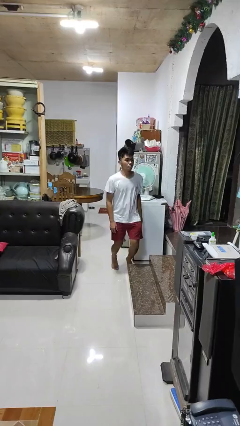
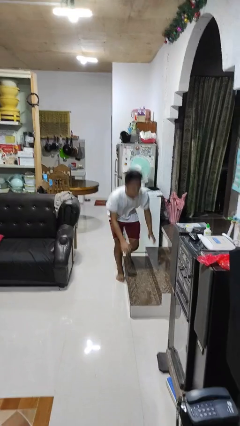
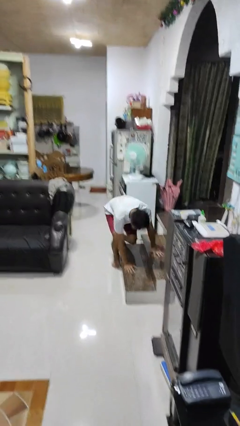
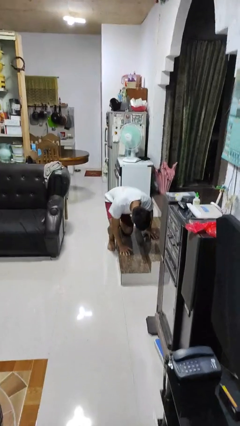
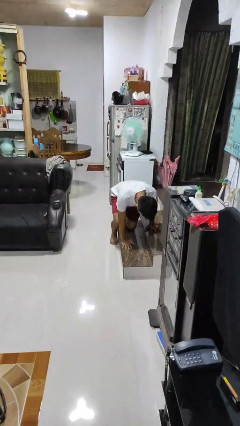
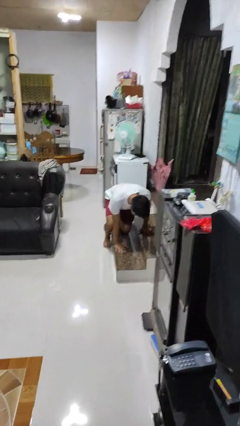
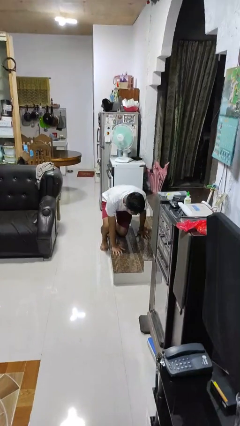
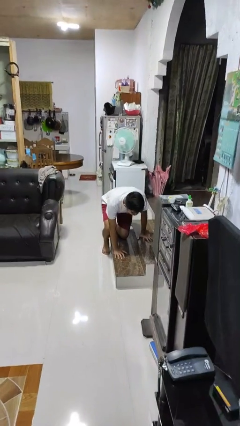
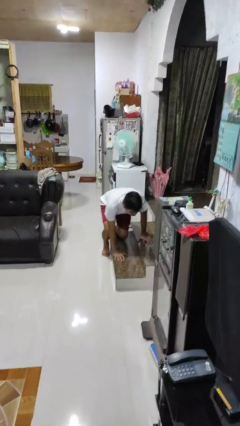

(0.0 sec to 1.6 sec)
person trips on object on floor

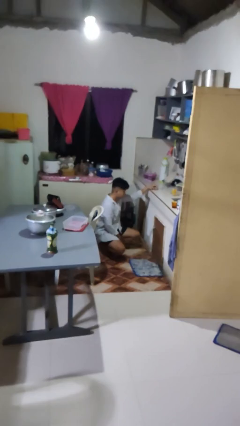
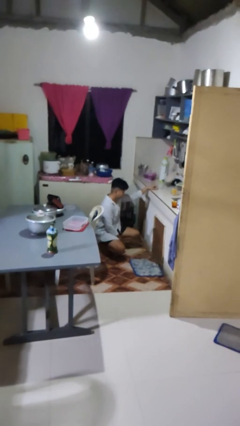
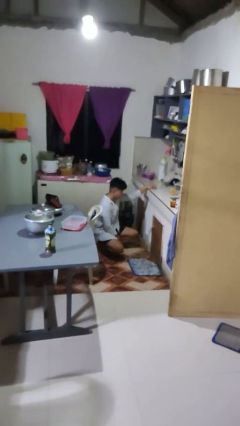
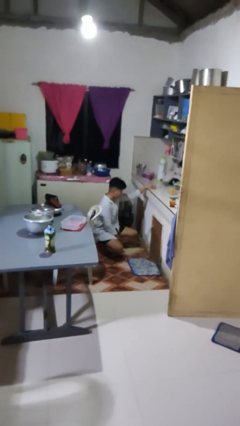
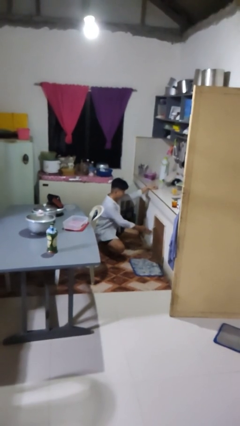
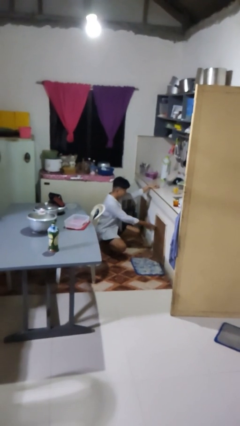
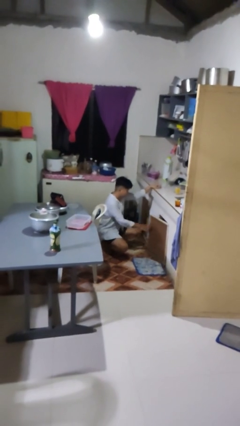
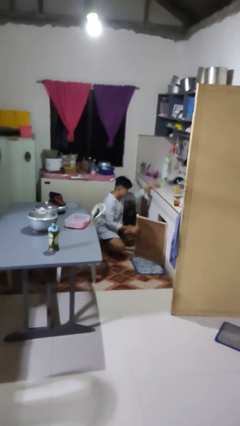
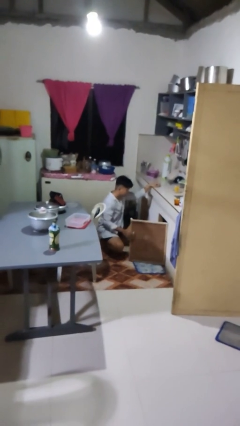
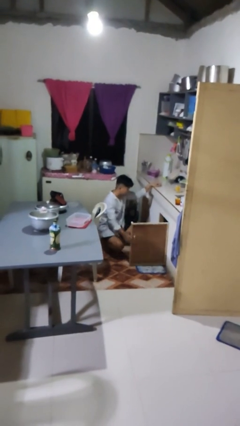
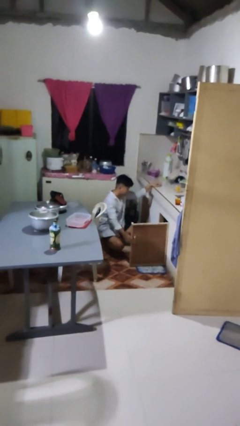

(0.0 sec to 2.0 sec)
person opens cabinet

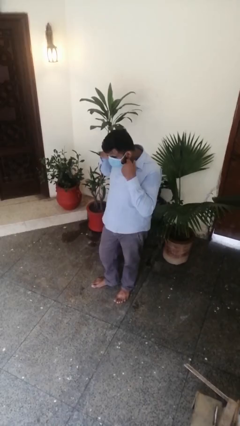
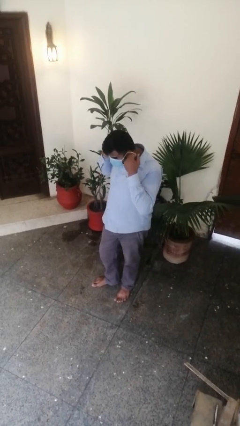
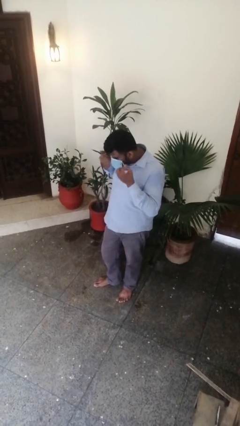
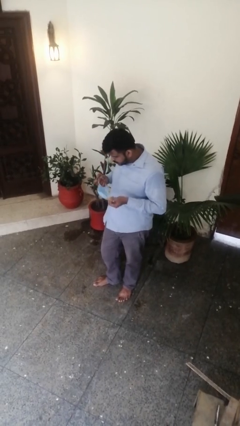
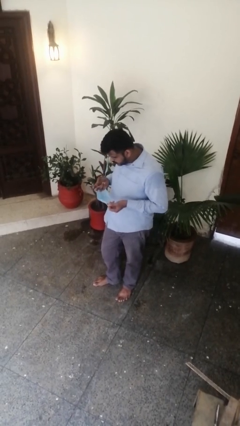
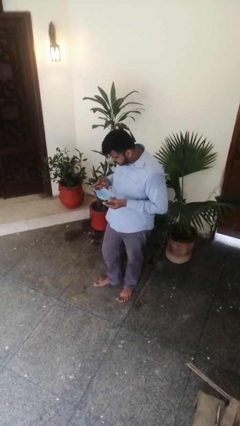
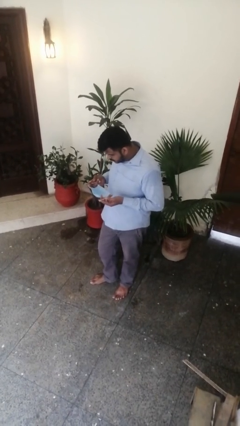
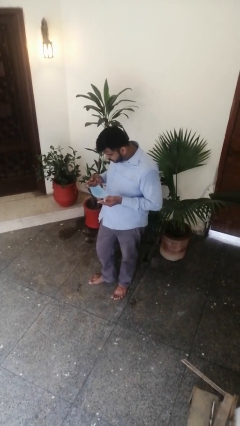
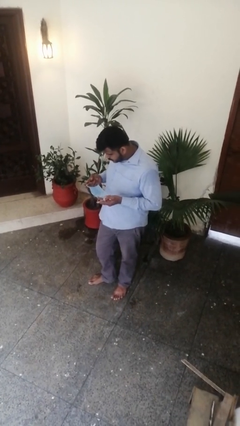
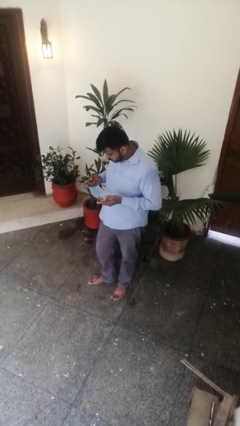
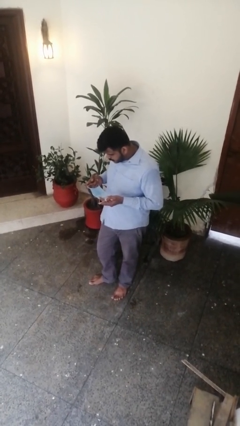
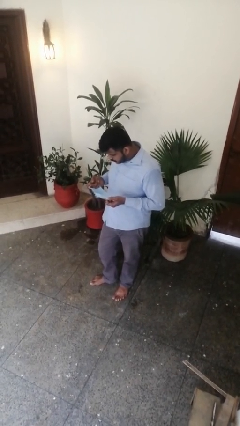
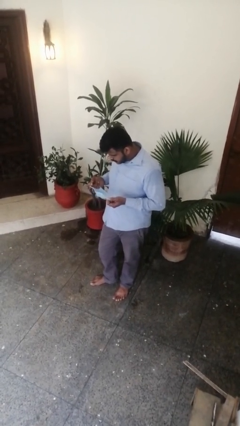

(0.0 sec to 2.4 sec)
person takes off facemask

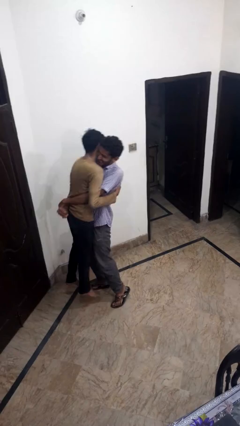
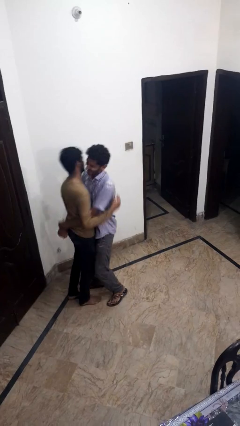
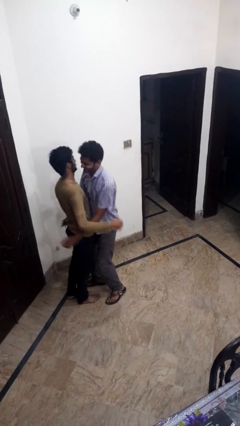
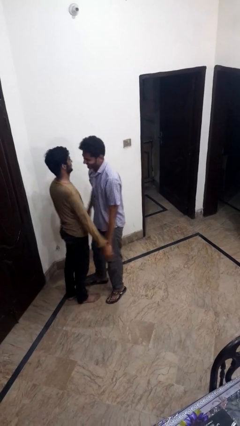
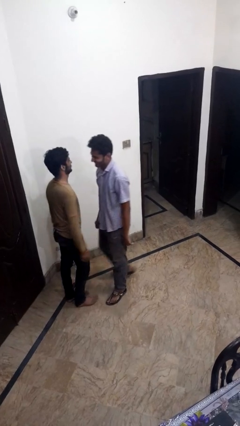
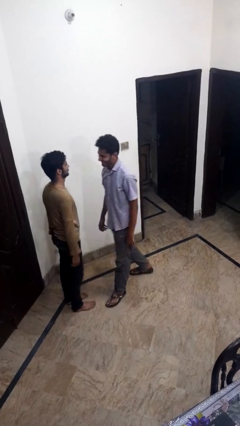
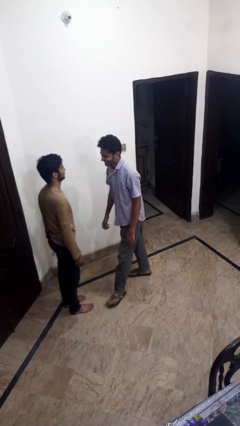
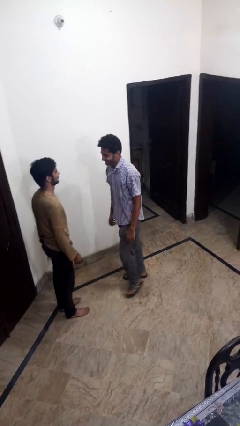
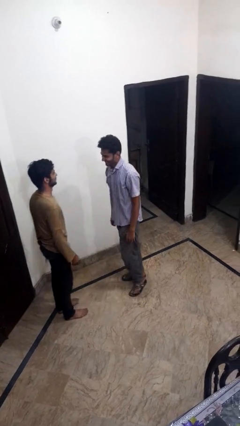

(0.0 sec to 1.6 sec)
person puts down person

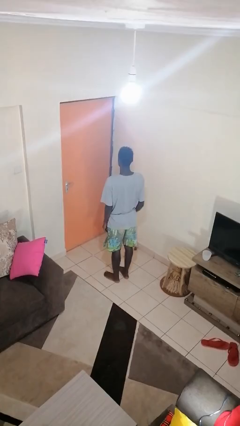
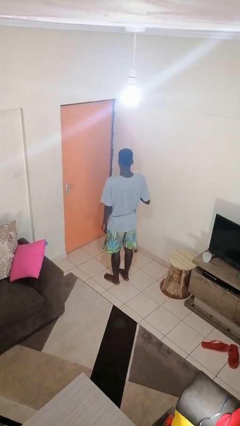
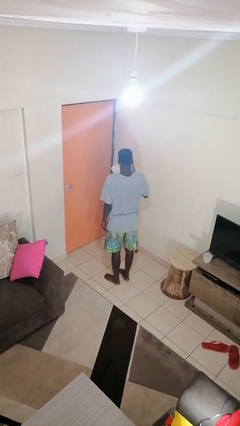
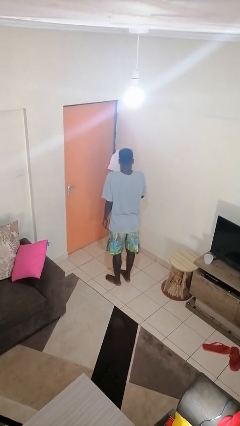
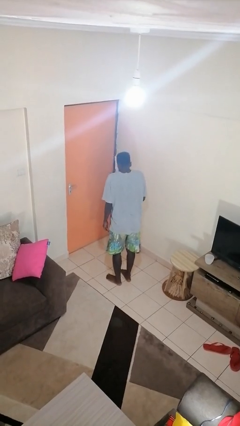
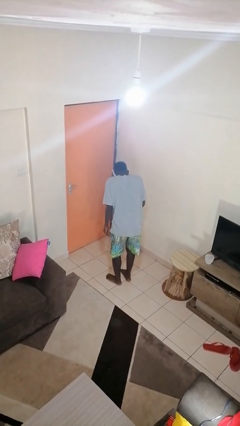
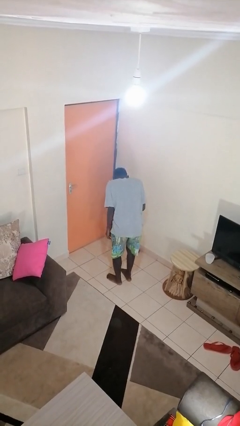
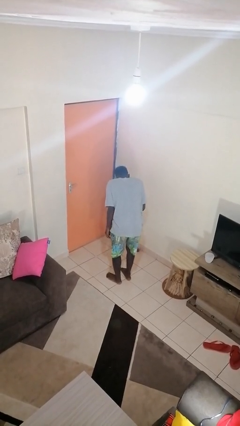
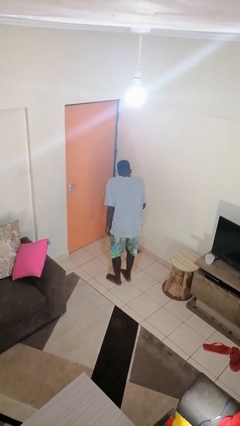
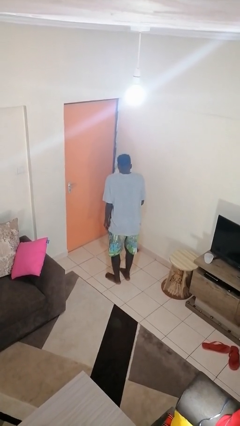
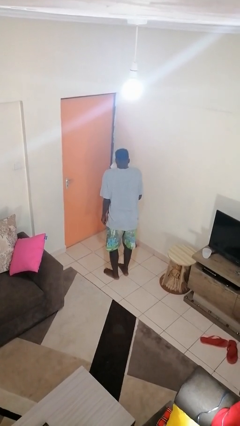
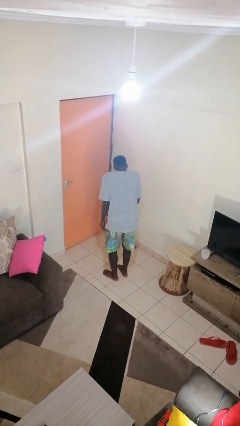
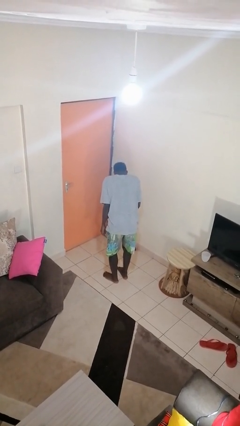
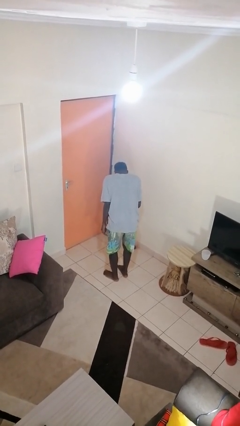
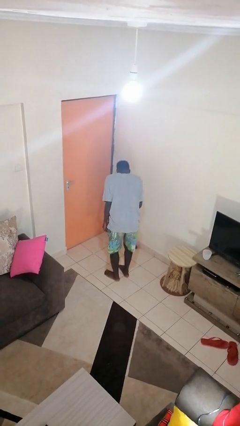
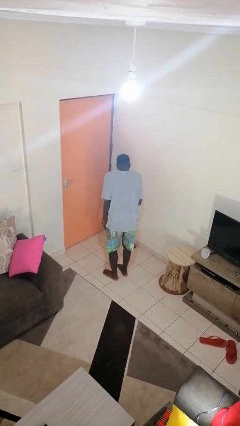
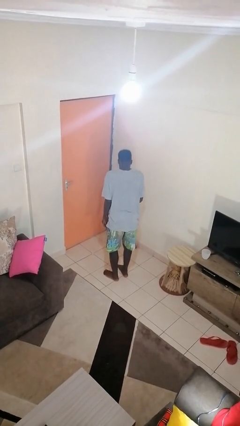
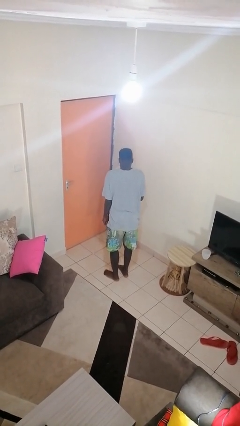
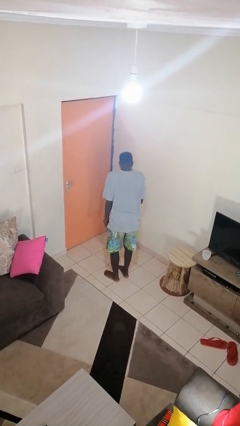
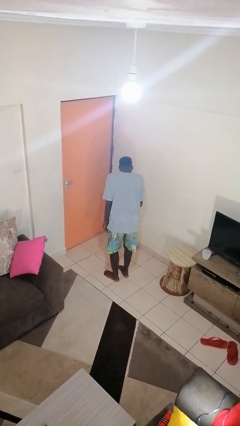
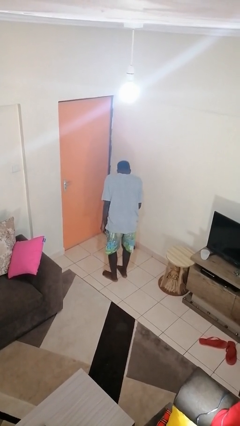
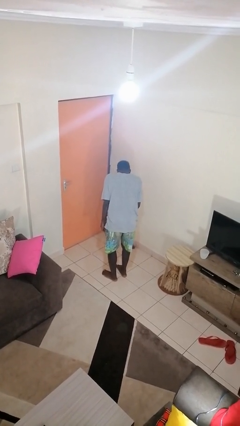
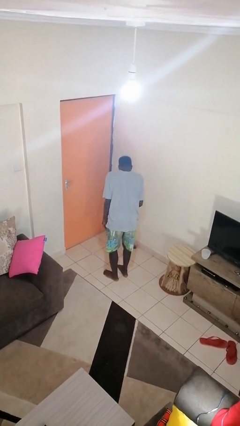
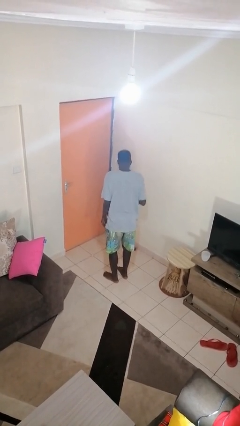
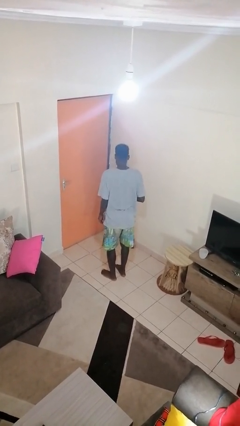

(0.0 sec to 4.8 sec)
person blows nose

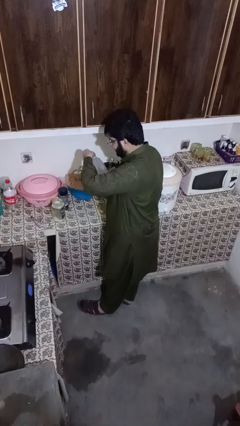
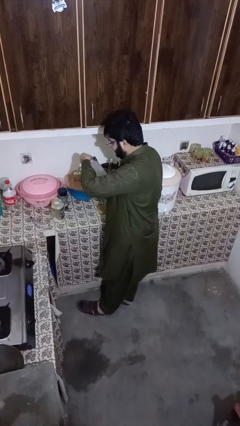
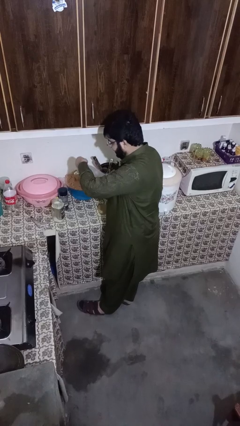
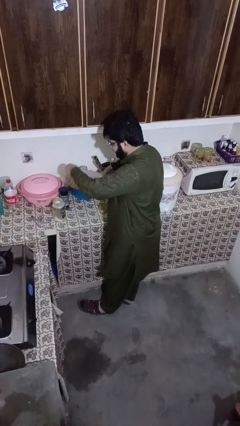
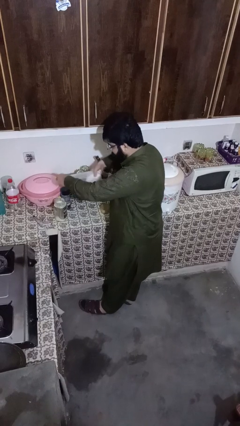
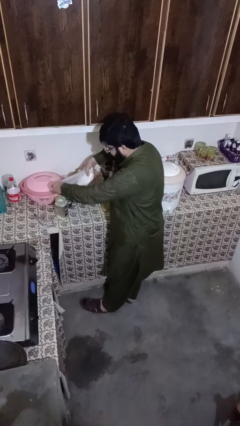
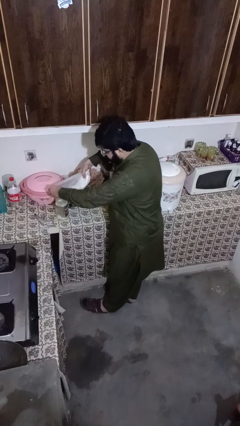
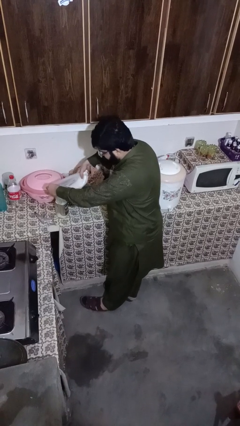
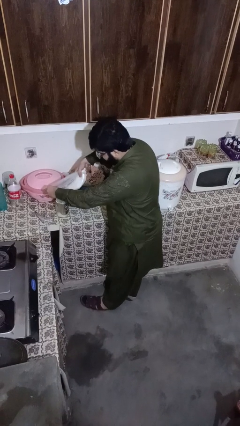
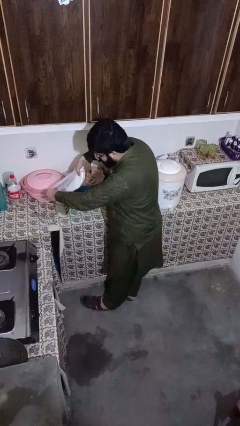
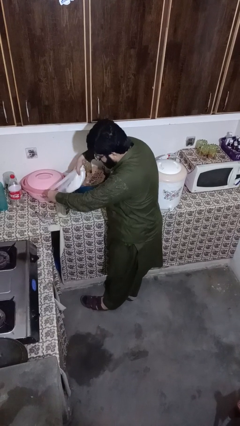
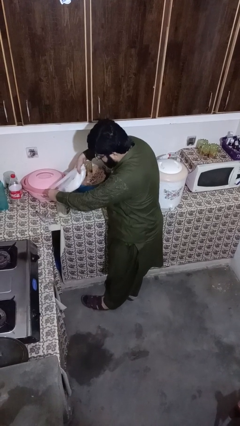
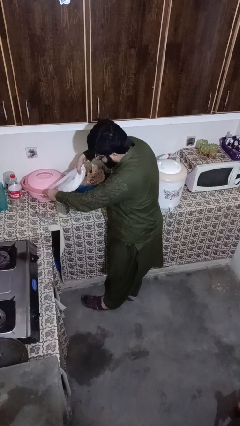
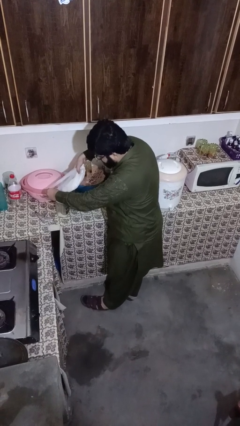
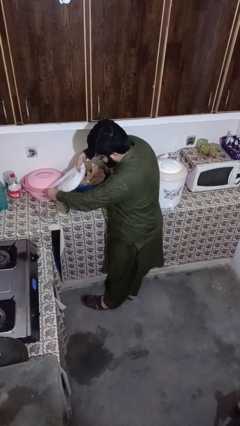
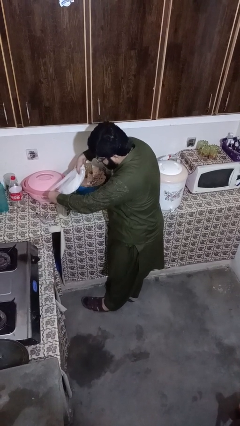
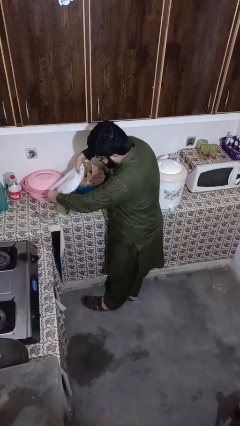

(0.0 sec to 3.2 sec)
person pours into bowl

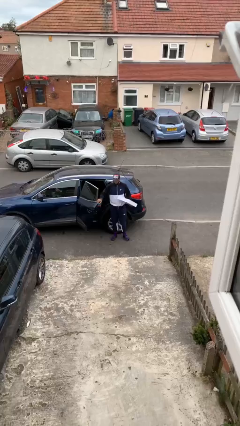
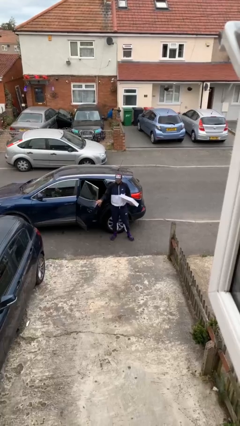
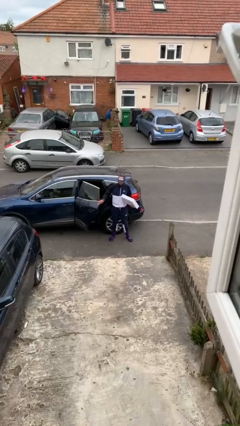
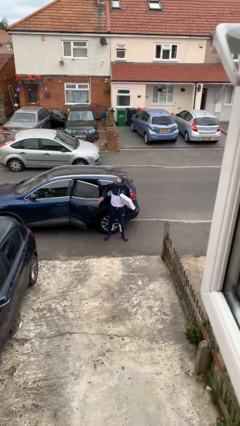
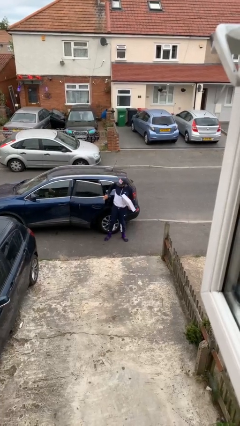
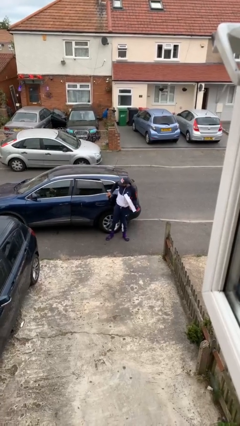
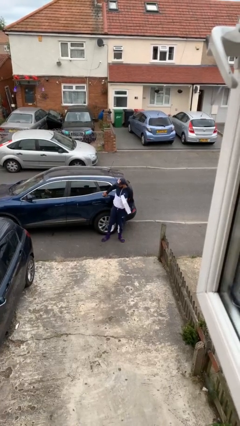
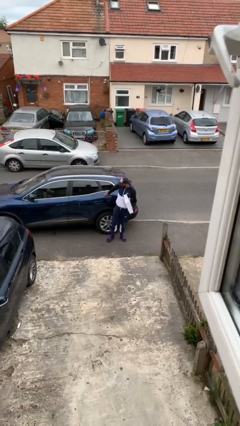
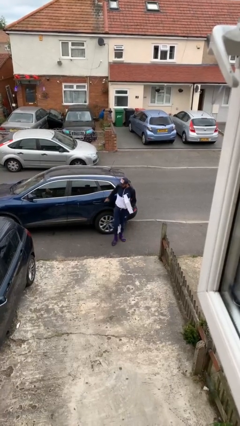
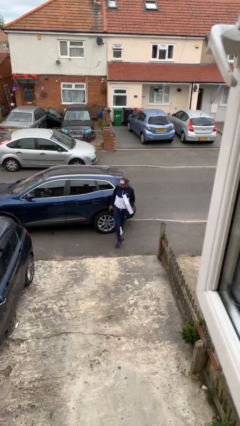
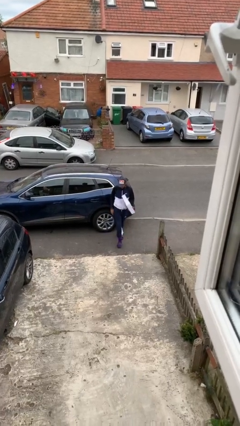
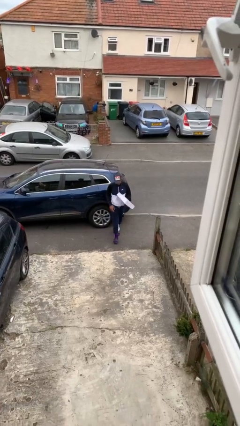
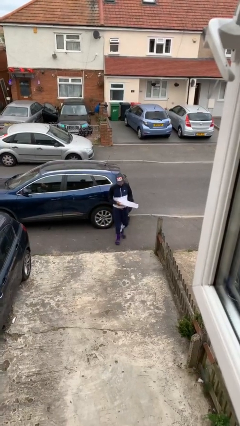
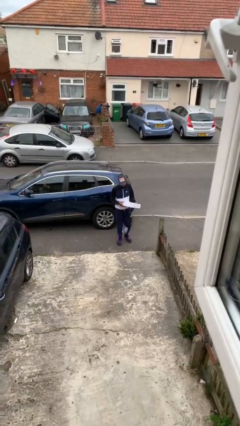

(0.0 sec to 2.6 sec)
person closes car door
